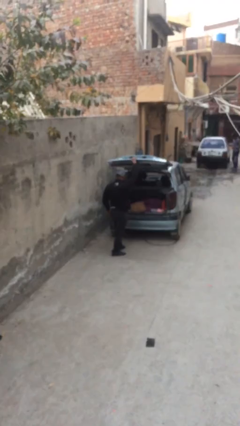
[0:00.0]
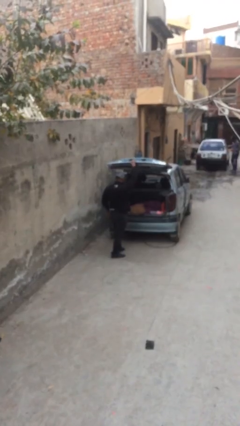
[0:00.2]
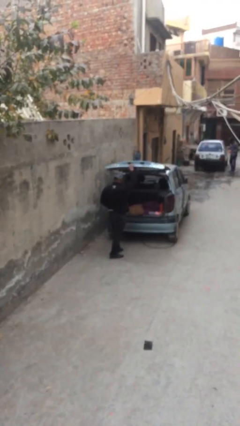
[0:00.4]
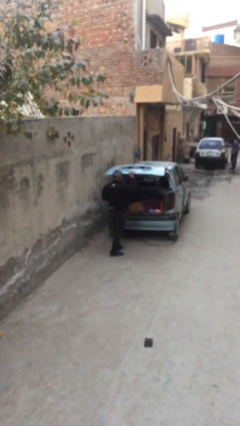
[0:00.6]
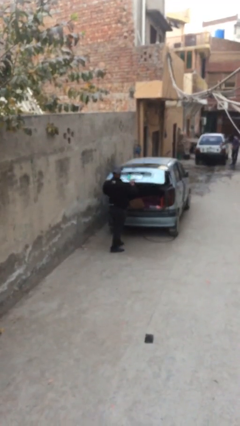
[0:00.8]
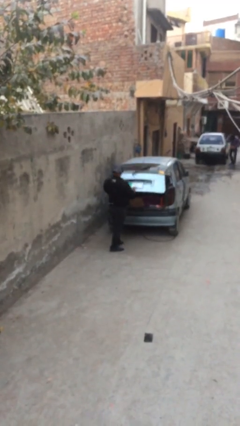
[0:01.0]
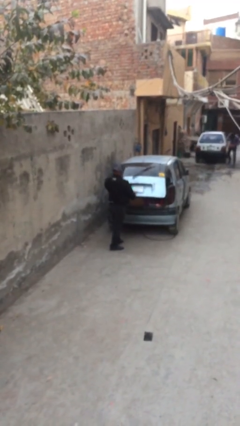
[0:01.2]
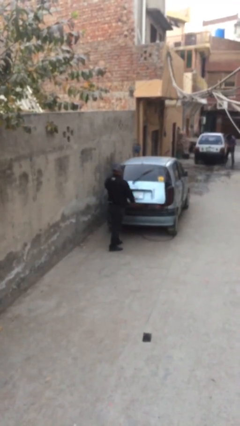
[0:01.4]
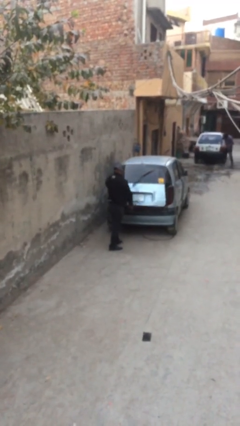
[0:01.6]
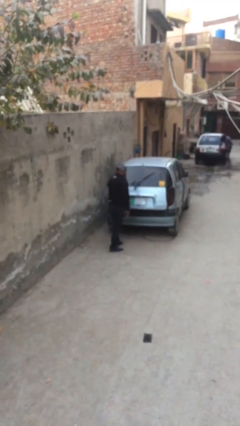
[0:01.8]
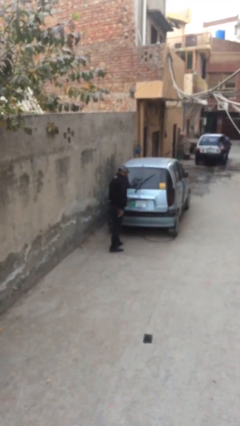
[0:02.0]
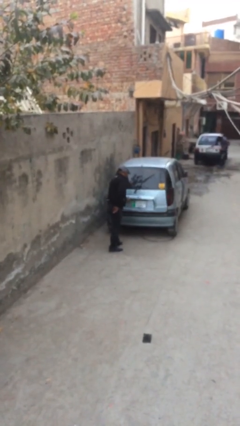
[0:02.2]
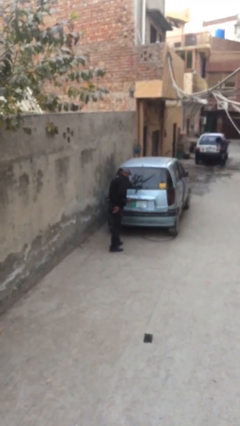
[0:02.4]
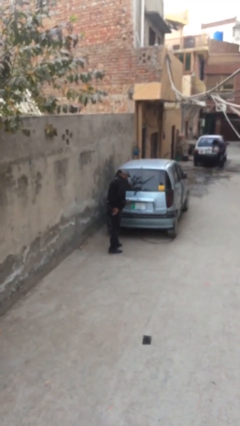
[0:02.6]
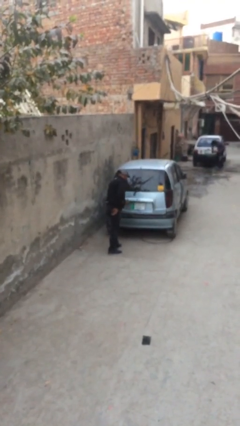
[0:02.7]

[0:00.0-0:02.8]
person closes car trunk

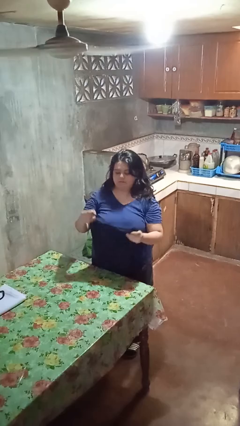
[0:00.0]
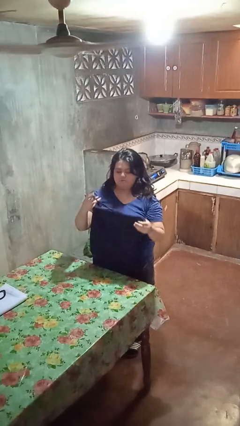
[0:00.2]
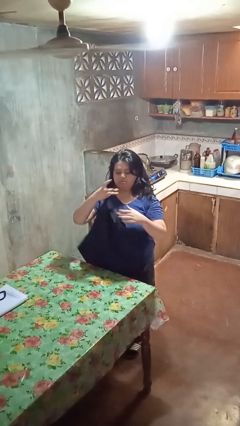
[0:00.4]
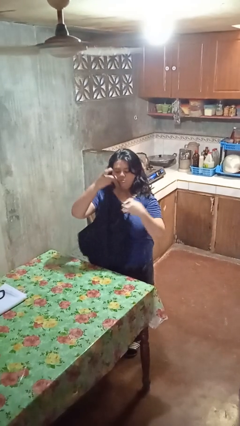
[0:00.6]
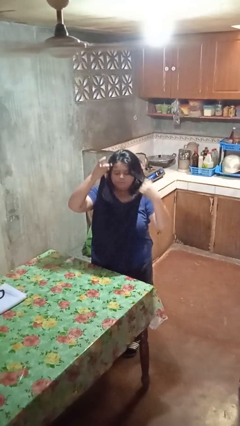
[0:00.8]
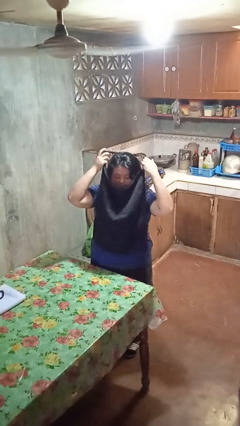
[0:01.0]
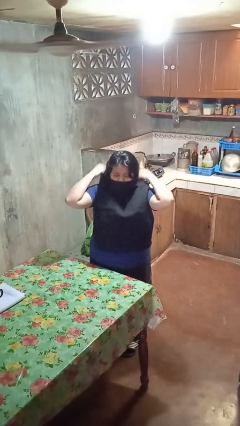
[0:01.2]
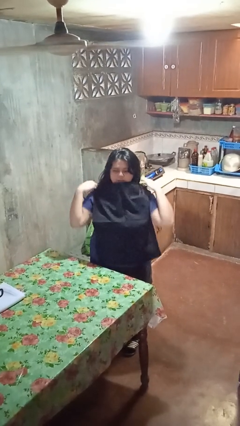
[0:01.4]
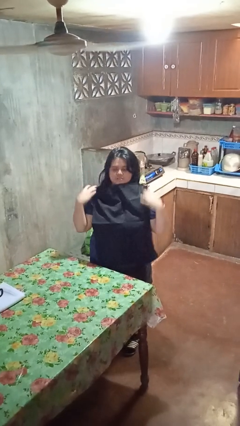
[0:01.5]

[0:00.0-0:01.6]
person puts on apron

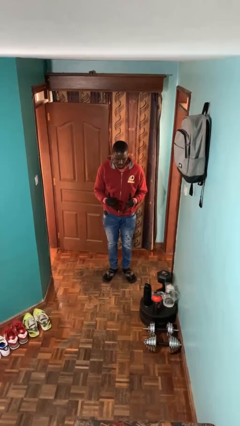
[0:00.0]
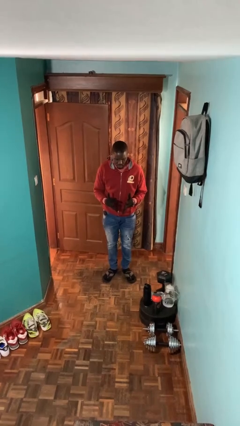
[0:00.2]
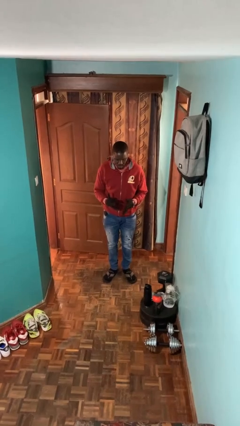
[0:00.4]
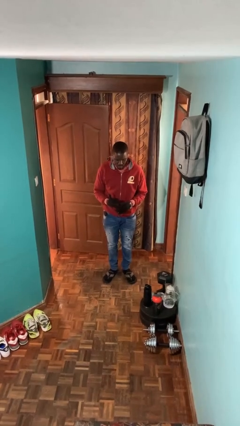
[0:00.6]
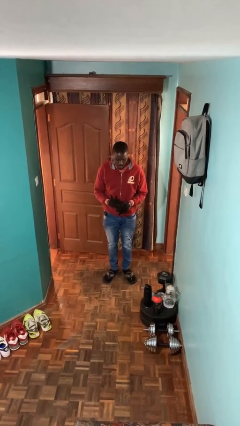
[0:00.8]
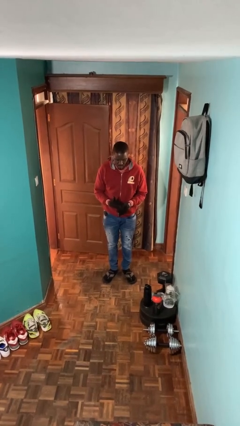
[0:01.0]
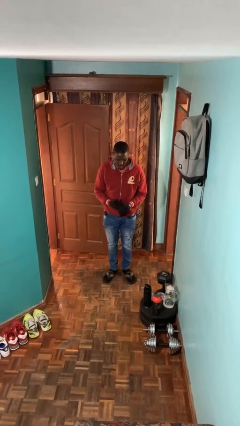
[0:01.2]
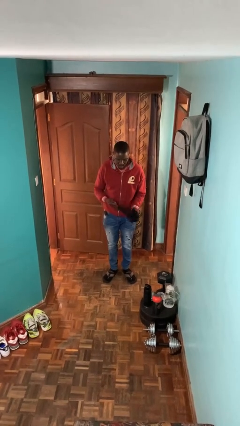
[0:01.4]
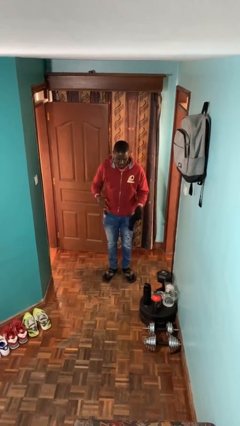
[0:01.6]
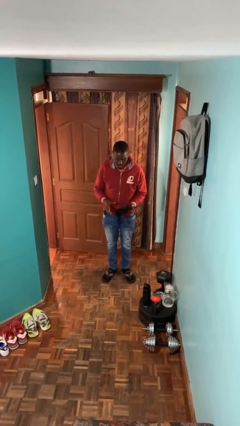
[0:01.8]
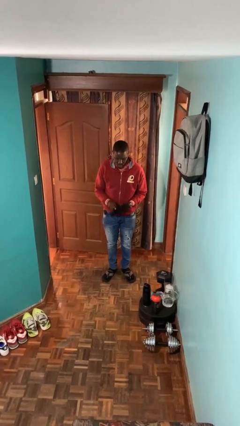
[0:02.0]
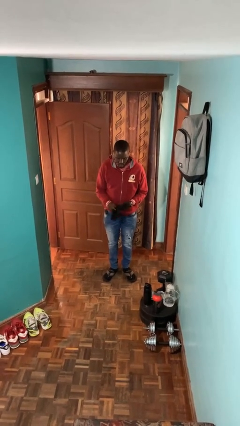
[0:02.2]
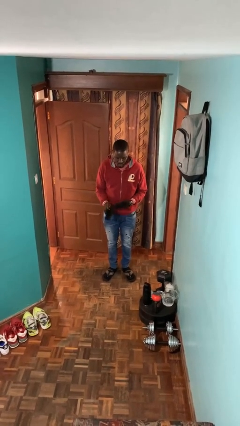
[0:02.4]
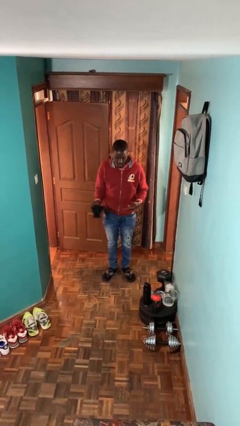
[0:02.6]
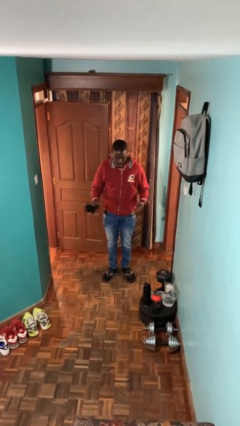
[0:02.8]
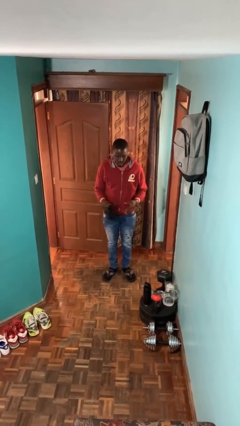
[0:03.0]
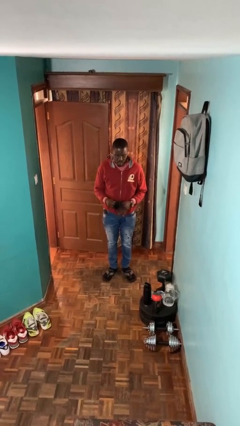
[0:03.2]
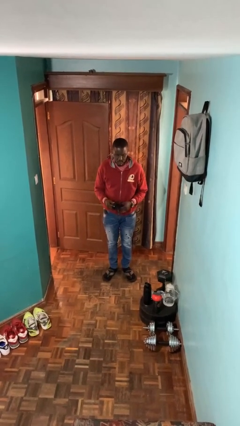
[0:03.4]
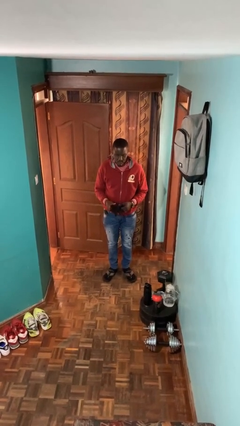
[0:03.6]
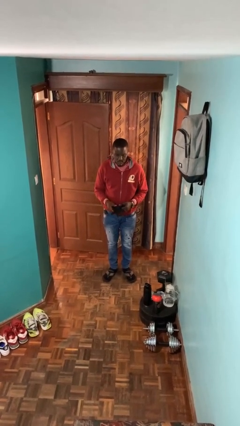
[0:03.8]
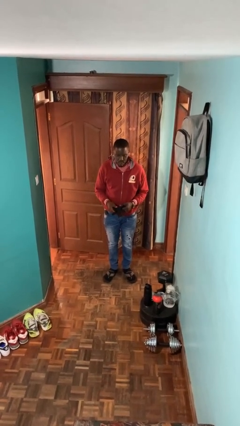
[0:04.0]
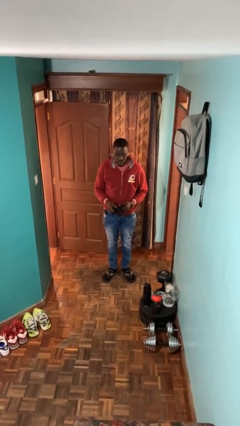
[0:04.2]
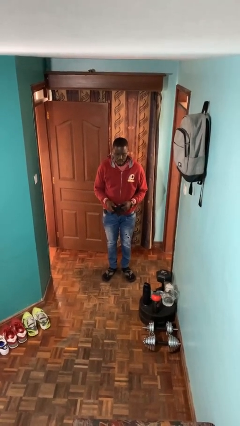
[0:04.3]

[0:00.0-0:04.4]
person takes off gloves

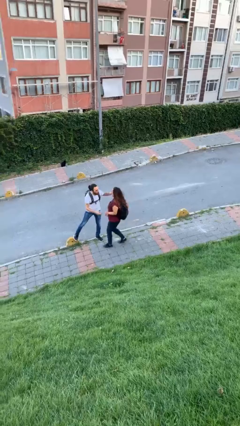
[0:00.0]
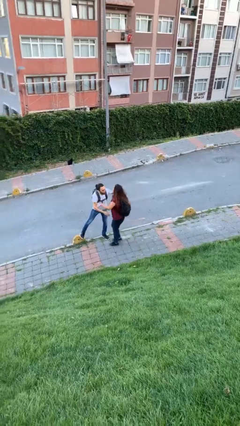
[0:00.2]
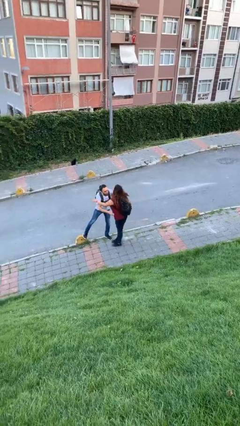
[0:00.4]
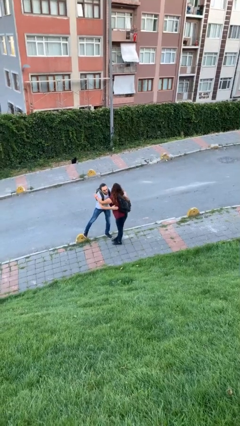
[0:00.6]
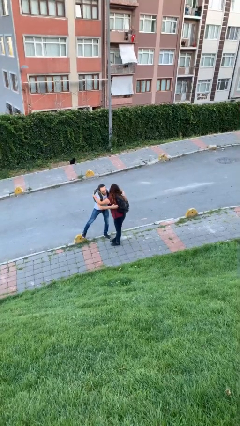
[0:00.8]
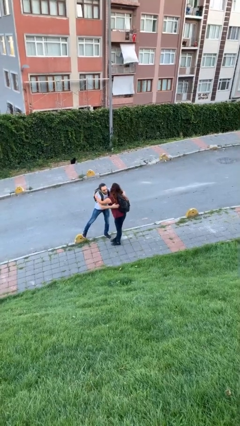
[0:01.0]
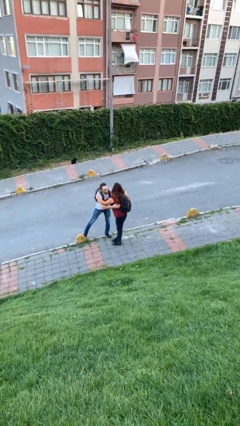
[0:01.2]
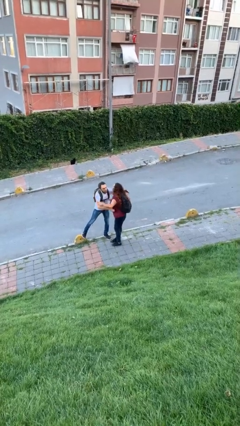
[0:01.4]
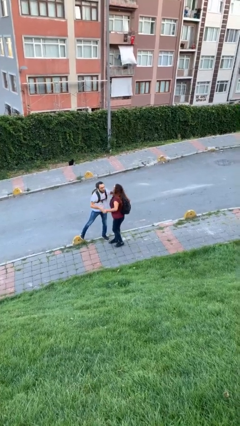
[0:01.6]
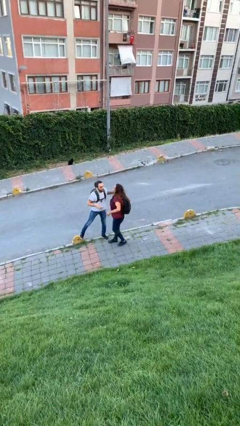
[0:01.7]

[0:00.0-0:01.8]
person embraces person

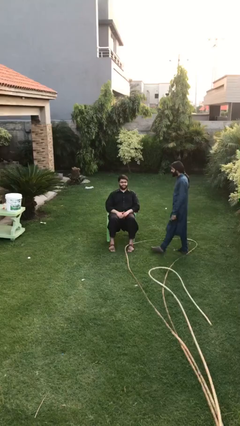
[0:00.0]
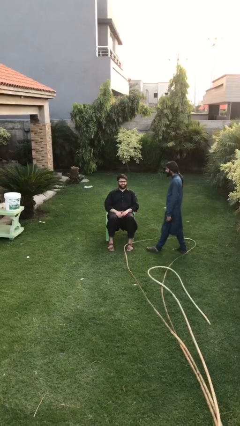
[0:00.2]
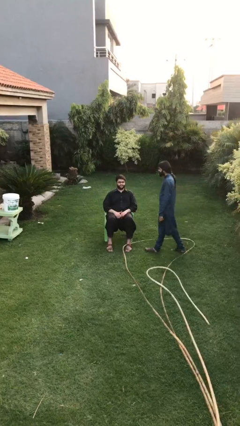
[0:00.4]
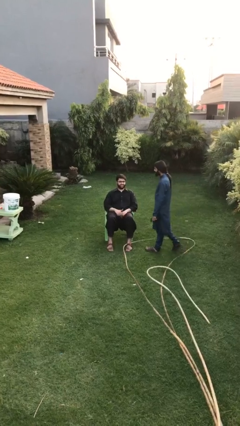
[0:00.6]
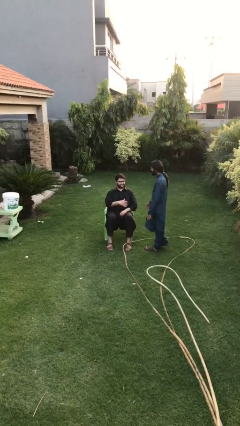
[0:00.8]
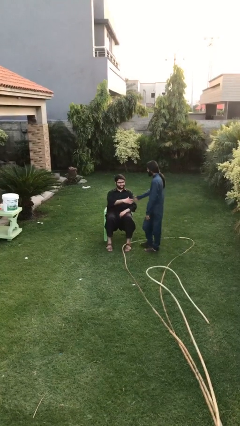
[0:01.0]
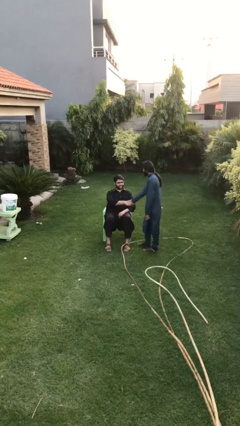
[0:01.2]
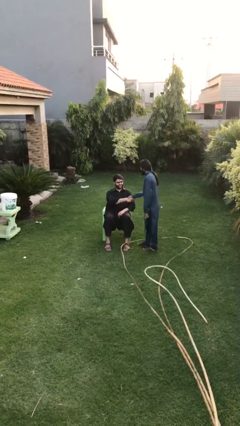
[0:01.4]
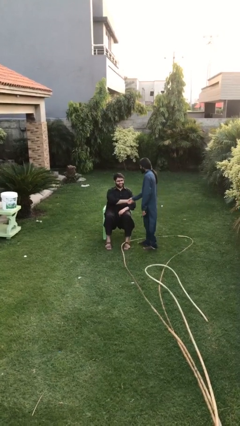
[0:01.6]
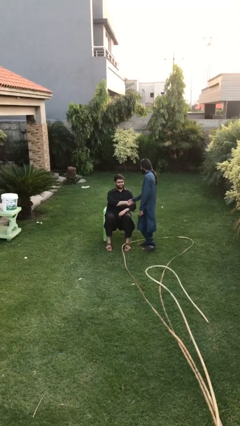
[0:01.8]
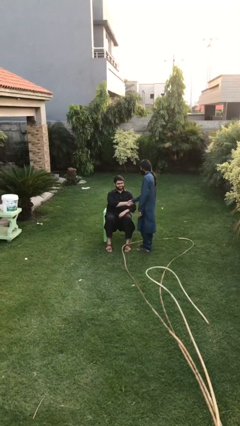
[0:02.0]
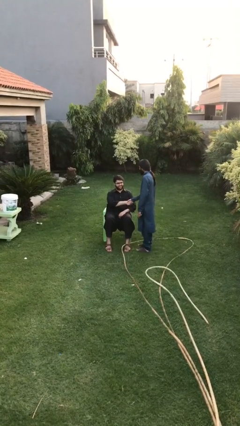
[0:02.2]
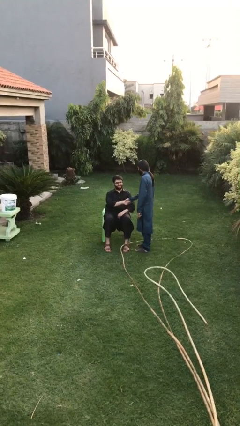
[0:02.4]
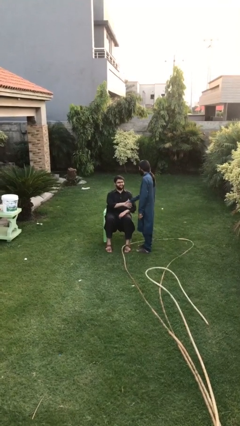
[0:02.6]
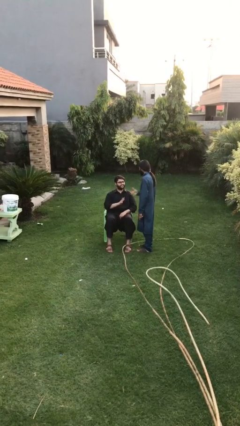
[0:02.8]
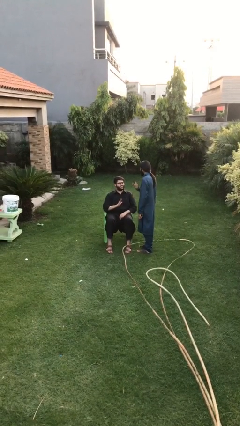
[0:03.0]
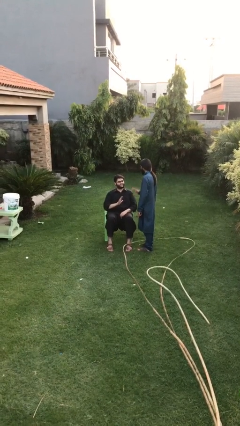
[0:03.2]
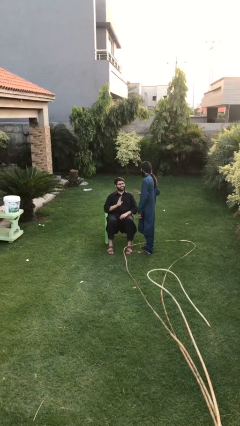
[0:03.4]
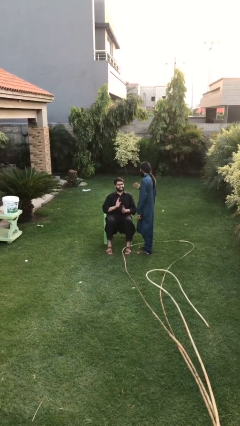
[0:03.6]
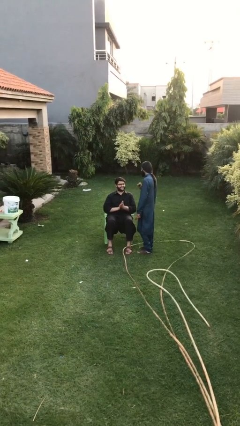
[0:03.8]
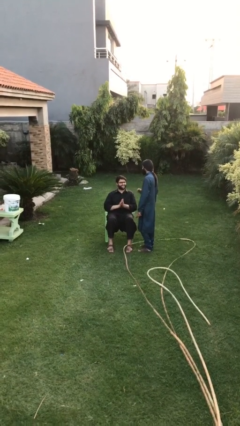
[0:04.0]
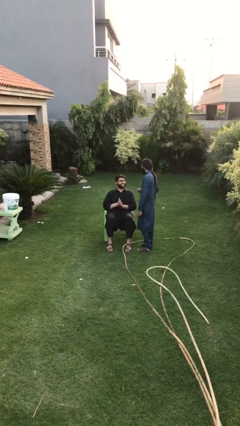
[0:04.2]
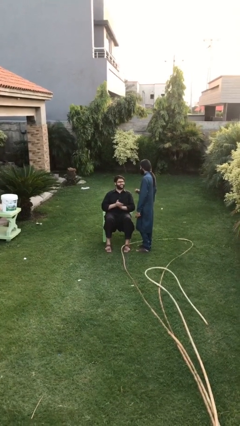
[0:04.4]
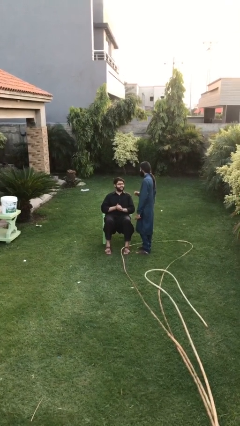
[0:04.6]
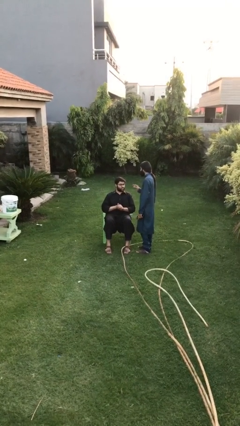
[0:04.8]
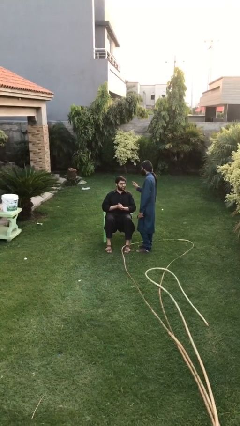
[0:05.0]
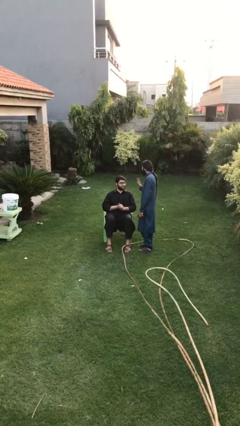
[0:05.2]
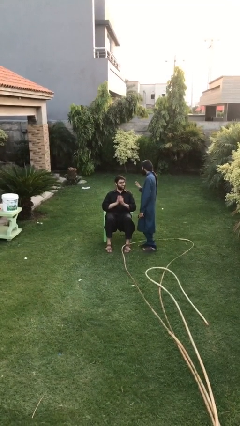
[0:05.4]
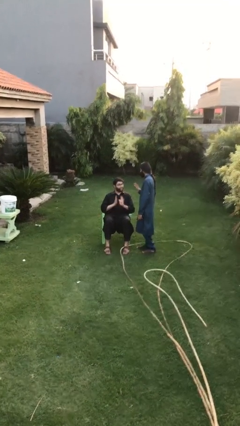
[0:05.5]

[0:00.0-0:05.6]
person shakes hand

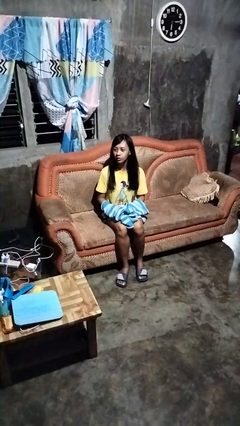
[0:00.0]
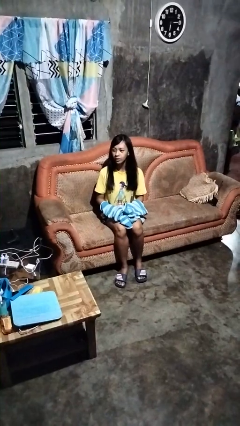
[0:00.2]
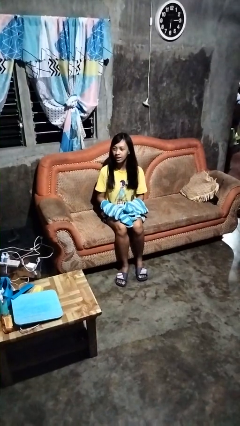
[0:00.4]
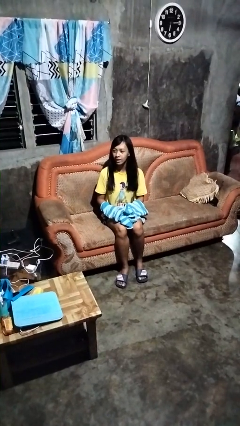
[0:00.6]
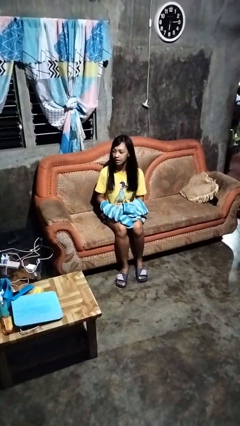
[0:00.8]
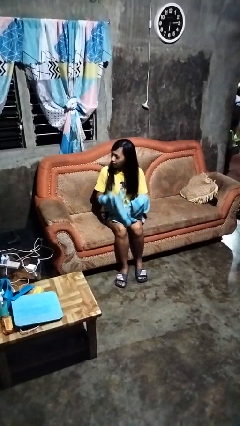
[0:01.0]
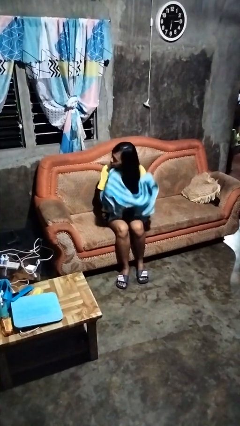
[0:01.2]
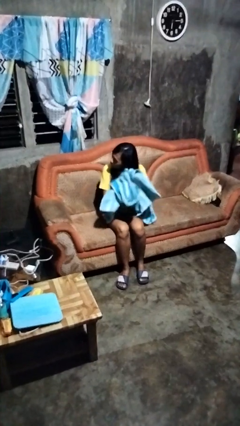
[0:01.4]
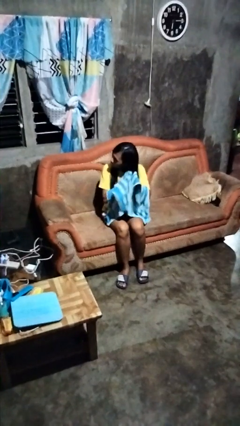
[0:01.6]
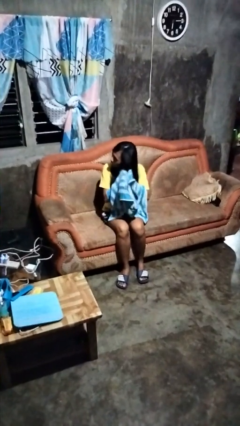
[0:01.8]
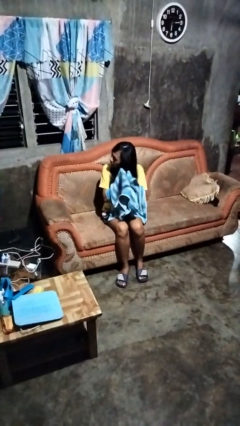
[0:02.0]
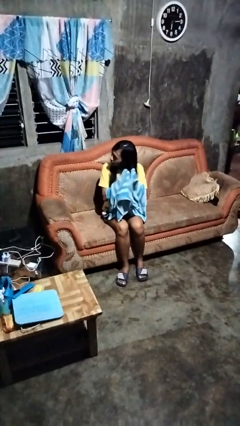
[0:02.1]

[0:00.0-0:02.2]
person dries hair with towel
